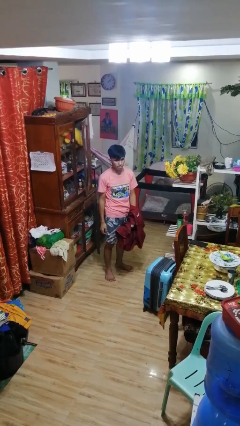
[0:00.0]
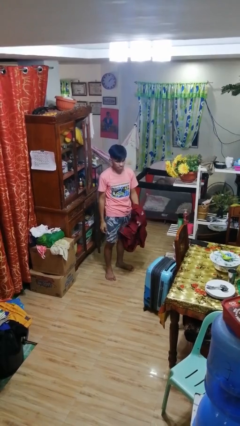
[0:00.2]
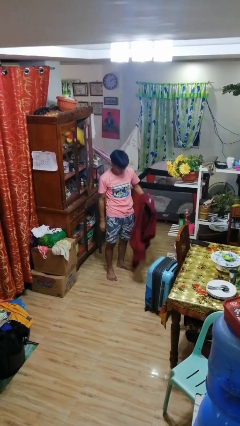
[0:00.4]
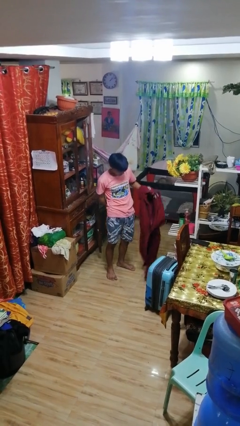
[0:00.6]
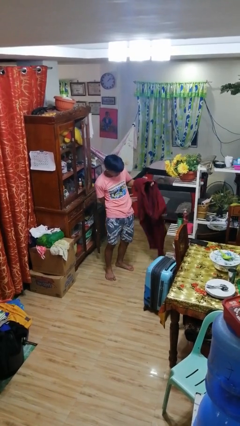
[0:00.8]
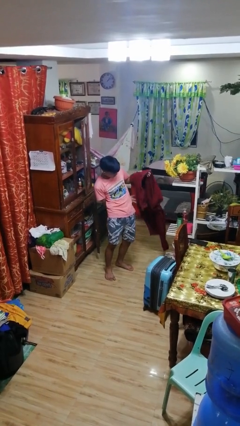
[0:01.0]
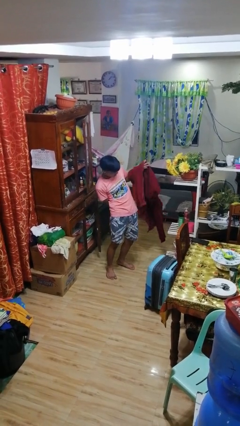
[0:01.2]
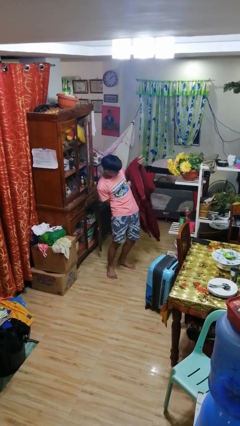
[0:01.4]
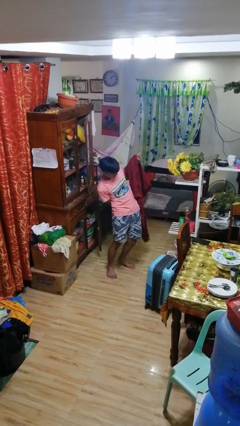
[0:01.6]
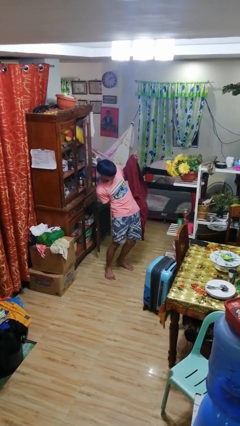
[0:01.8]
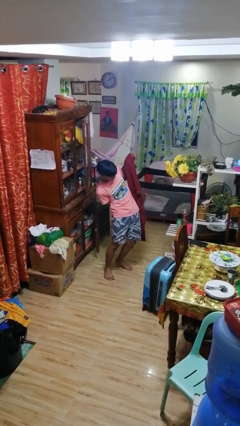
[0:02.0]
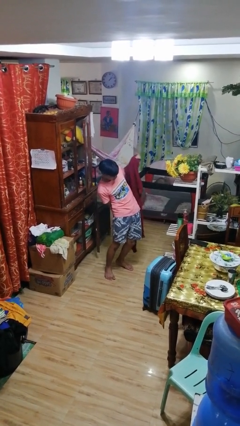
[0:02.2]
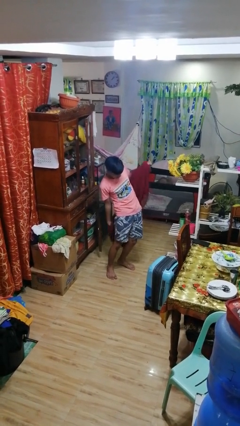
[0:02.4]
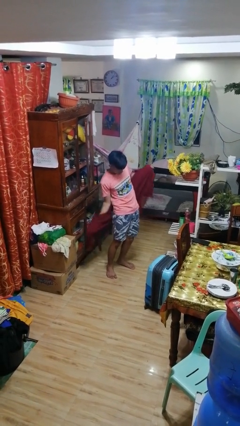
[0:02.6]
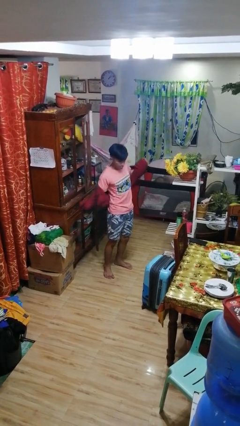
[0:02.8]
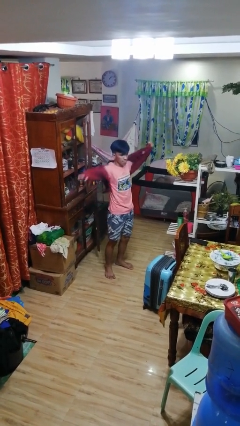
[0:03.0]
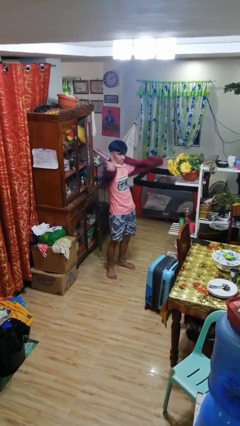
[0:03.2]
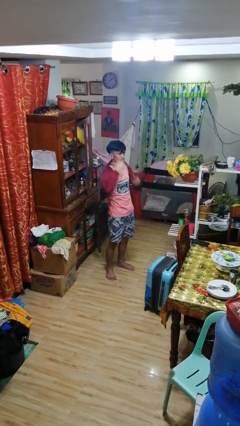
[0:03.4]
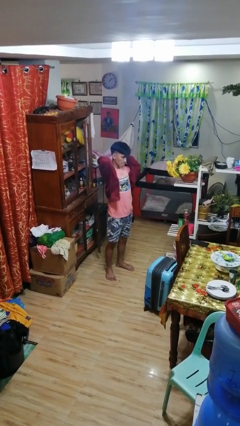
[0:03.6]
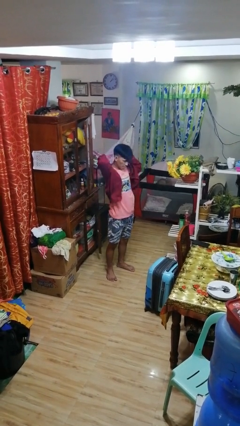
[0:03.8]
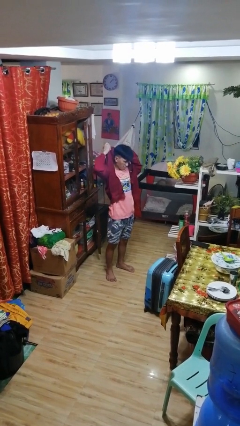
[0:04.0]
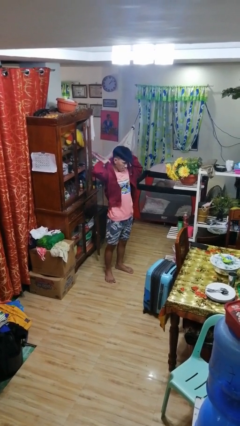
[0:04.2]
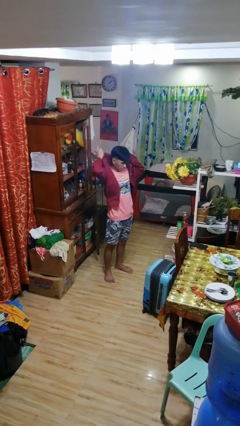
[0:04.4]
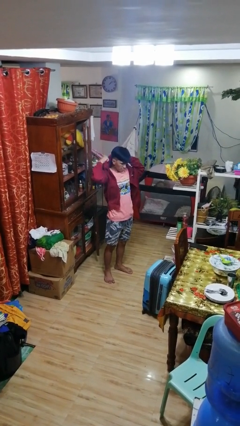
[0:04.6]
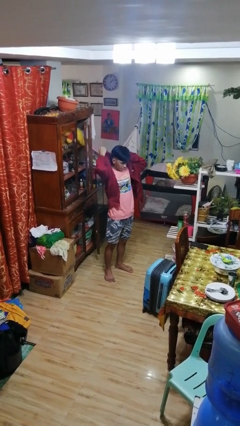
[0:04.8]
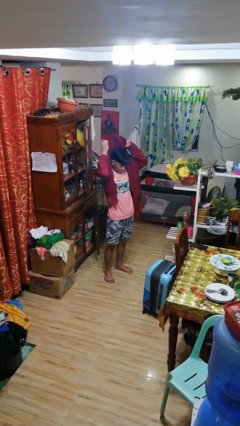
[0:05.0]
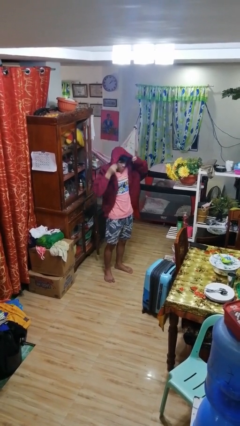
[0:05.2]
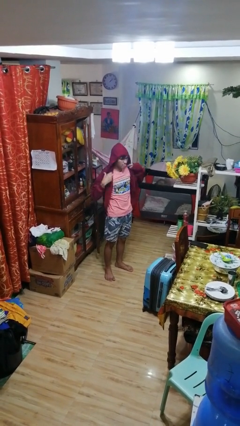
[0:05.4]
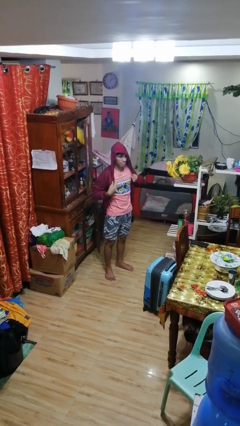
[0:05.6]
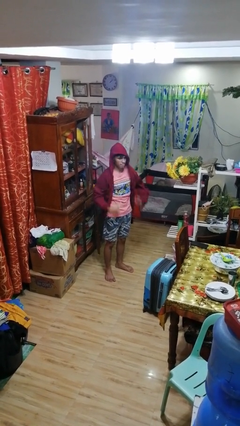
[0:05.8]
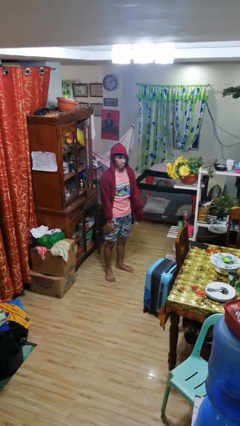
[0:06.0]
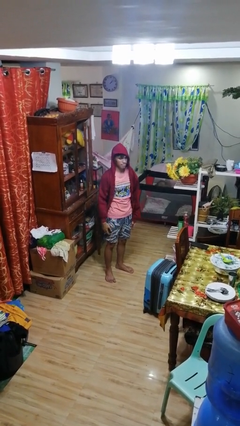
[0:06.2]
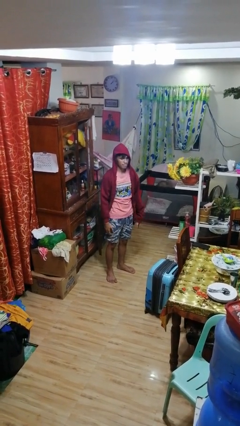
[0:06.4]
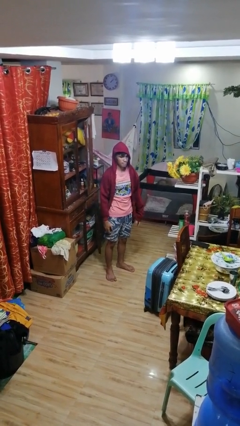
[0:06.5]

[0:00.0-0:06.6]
person puts on hoodie

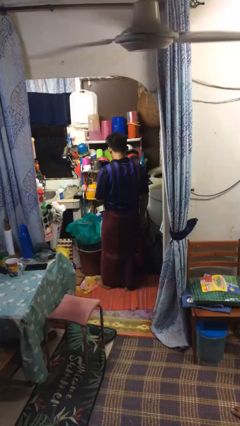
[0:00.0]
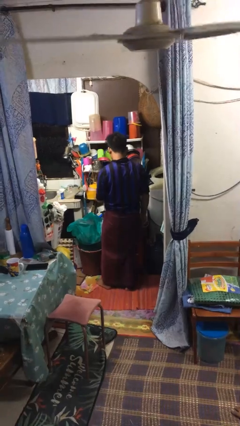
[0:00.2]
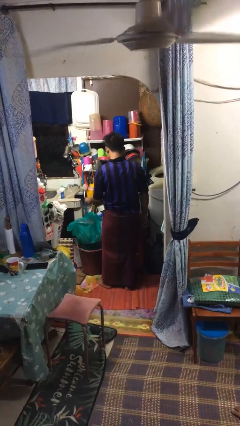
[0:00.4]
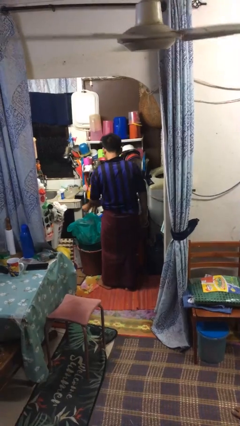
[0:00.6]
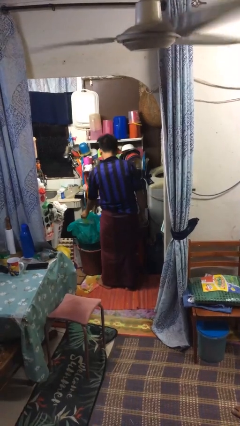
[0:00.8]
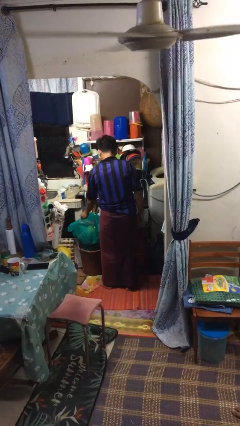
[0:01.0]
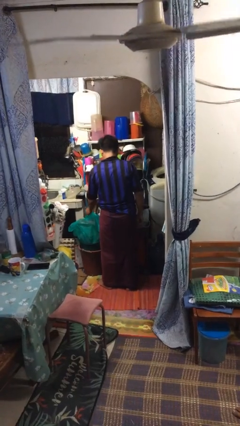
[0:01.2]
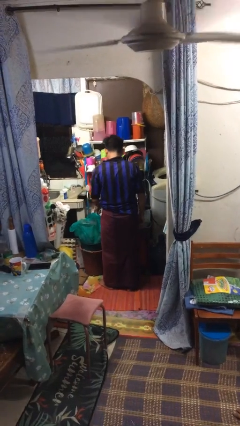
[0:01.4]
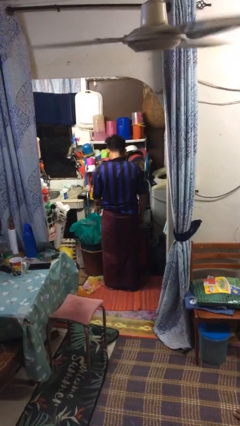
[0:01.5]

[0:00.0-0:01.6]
person discards trash

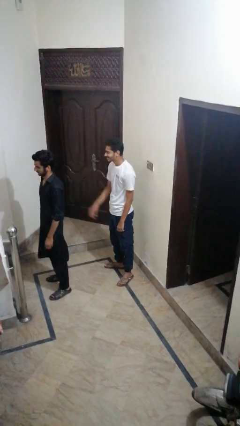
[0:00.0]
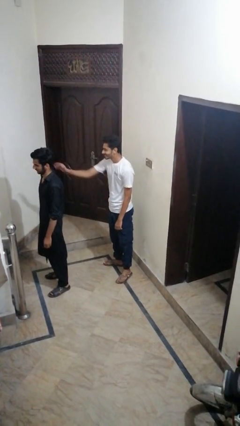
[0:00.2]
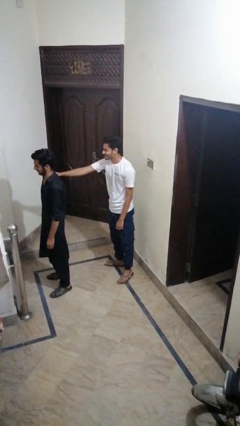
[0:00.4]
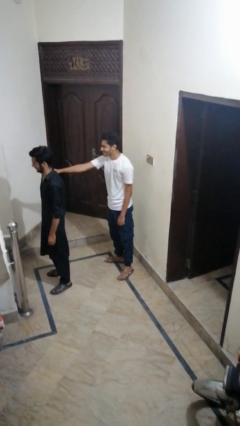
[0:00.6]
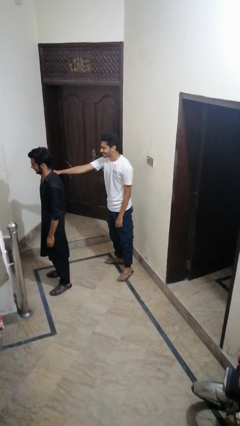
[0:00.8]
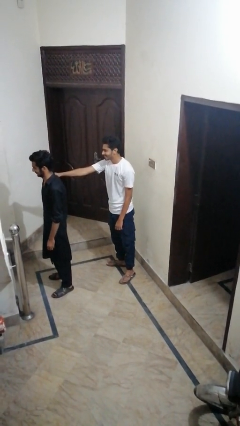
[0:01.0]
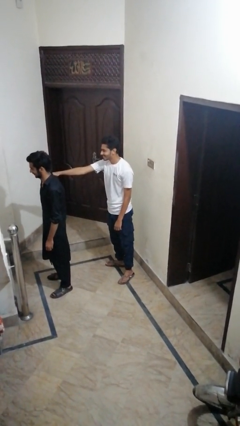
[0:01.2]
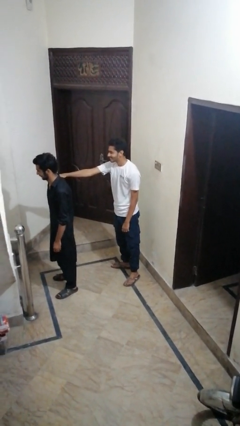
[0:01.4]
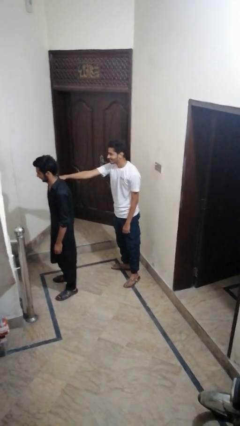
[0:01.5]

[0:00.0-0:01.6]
person grabs person by shoulder

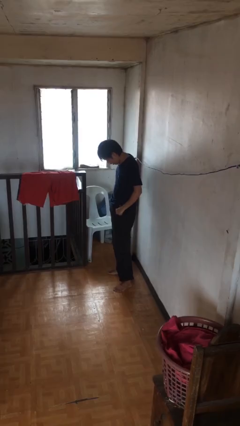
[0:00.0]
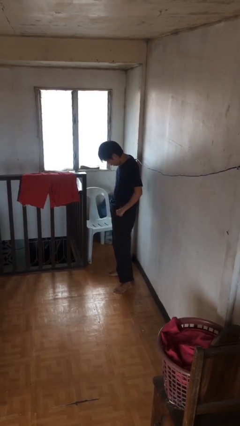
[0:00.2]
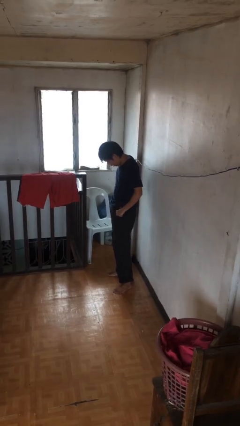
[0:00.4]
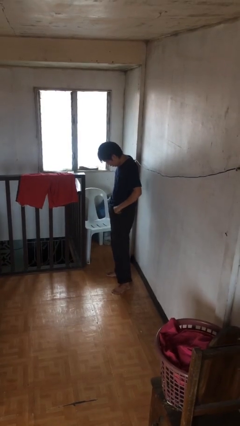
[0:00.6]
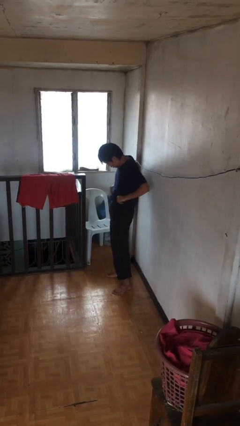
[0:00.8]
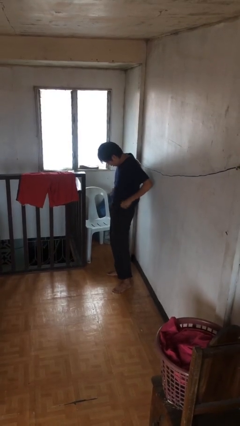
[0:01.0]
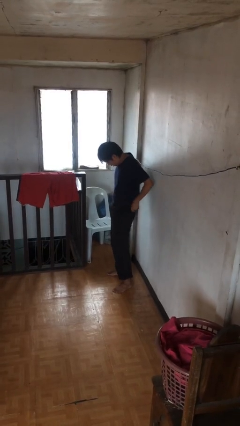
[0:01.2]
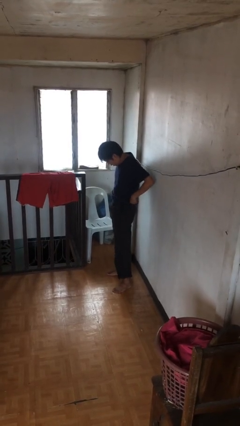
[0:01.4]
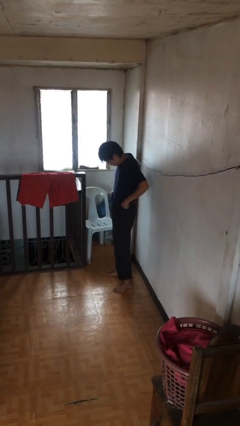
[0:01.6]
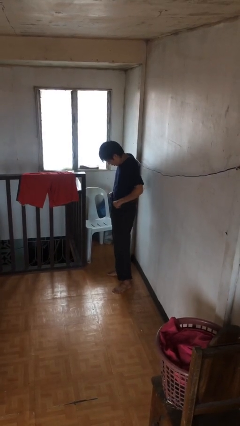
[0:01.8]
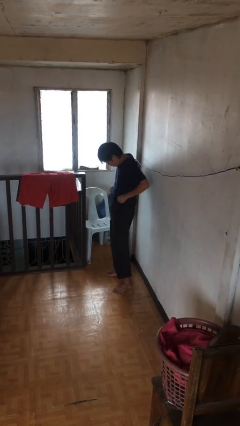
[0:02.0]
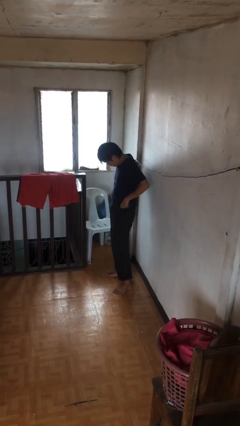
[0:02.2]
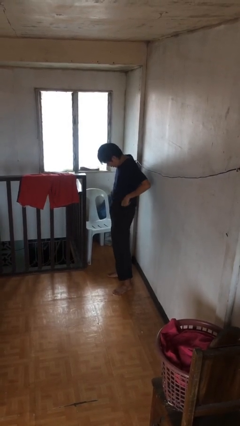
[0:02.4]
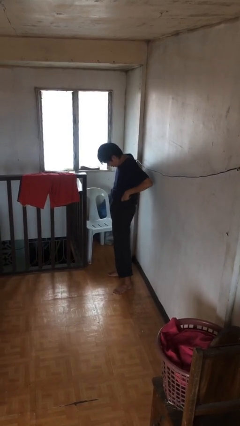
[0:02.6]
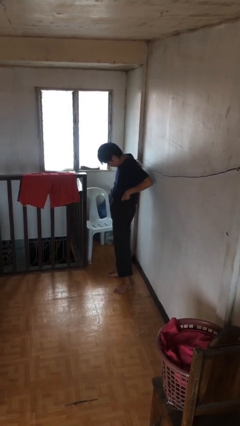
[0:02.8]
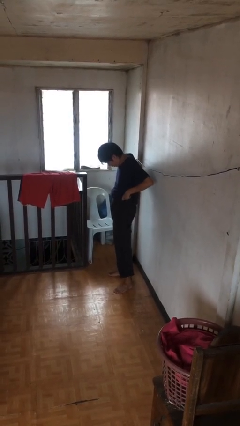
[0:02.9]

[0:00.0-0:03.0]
person hikes up pants

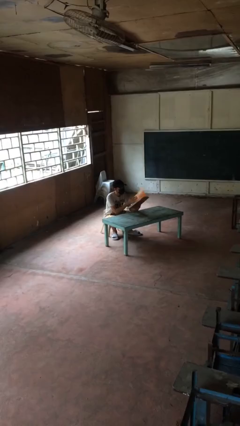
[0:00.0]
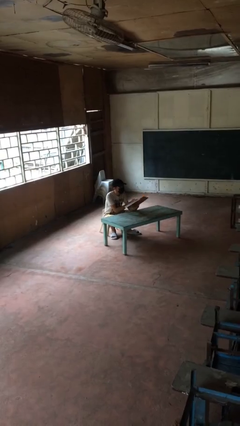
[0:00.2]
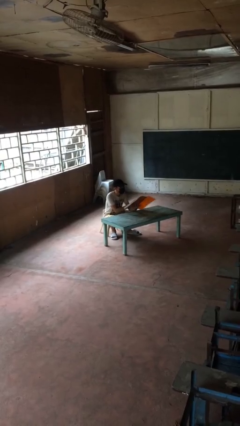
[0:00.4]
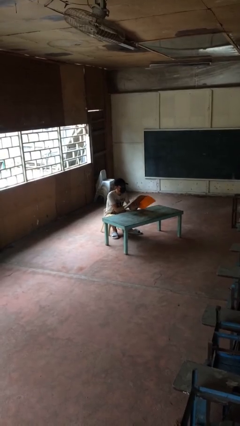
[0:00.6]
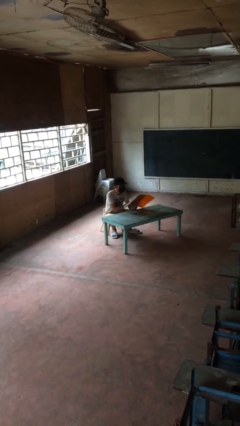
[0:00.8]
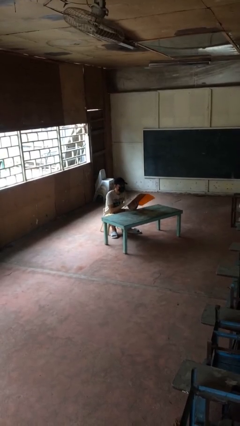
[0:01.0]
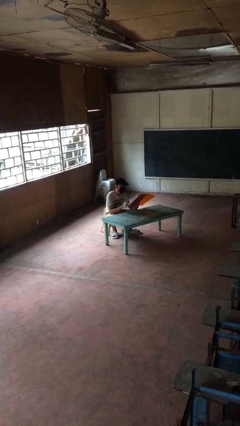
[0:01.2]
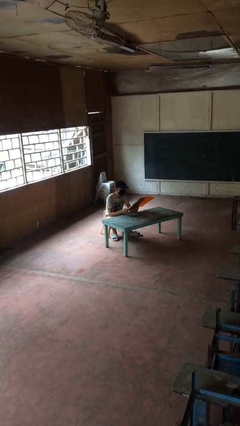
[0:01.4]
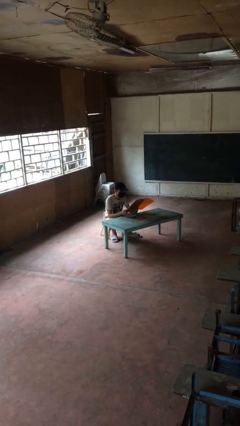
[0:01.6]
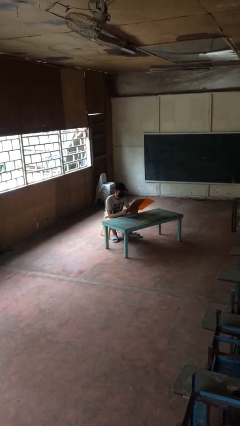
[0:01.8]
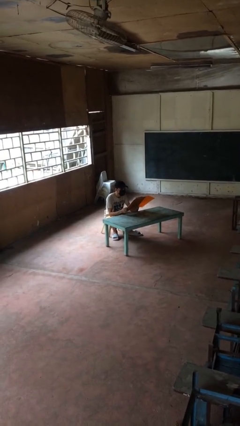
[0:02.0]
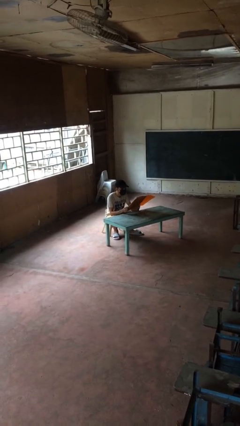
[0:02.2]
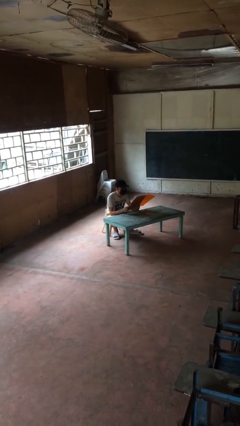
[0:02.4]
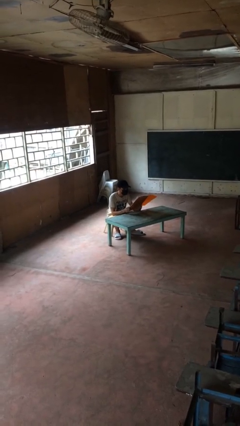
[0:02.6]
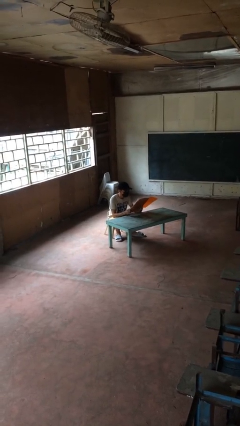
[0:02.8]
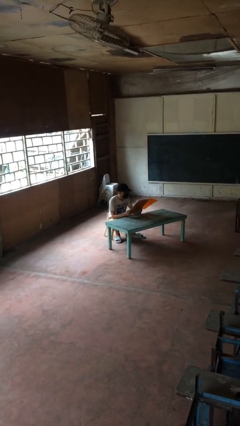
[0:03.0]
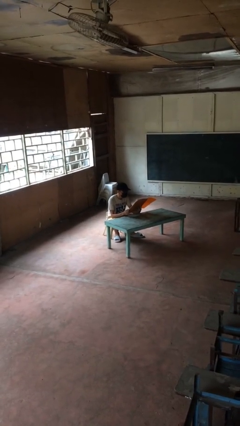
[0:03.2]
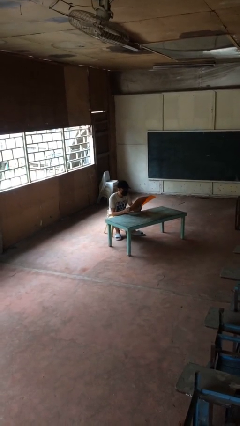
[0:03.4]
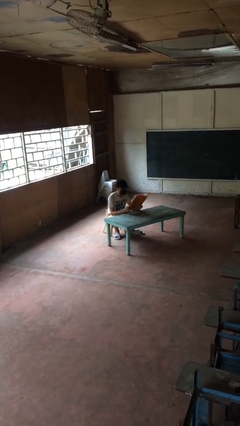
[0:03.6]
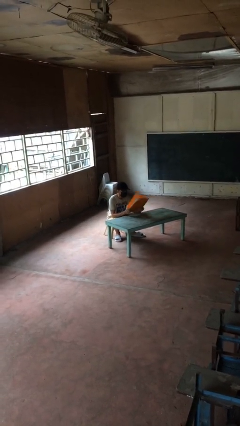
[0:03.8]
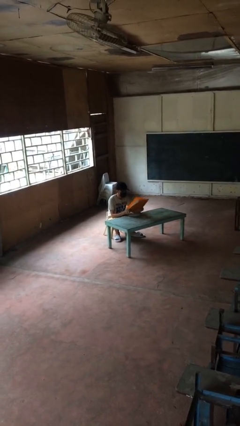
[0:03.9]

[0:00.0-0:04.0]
person reads document

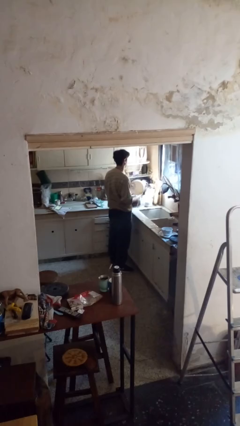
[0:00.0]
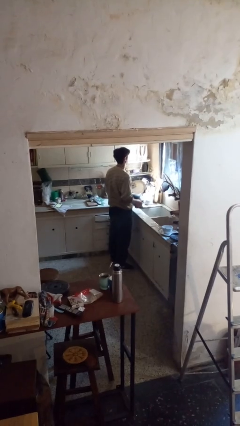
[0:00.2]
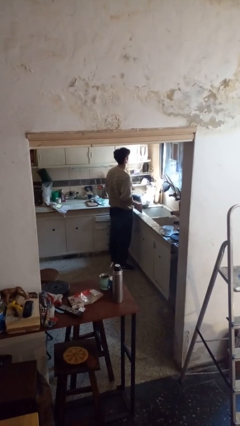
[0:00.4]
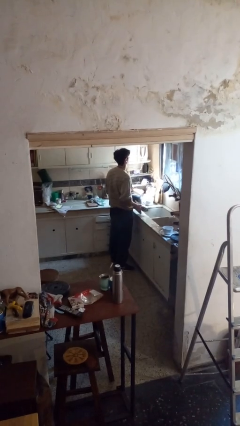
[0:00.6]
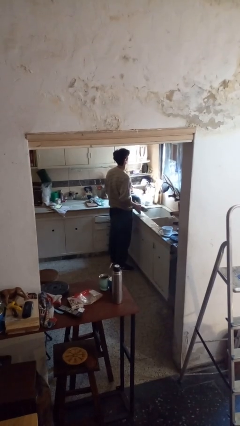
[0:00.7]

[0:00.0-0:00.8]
person dries dish
